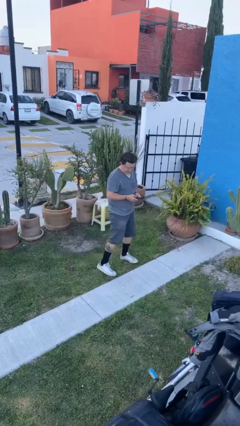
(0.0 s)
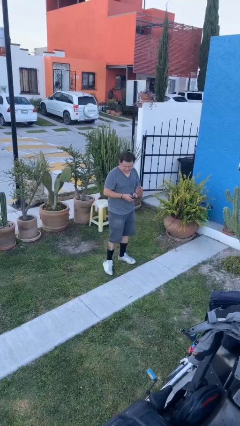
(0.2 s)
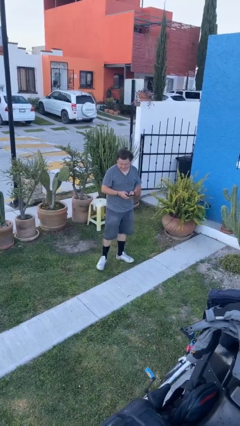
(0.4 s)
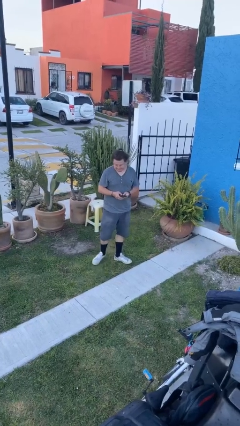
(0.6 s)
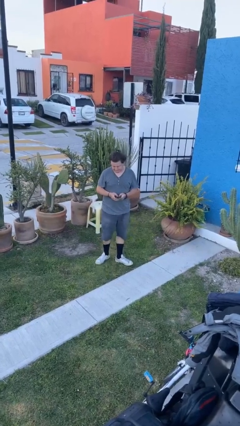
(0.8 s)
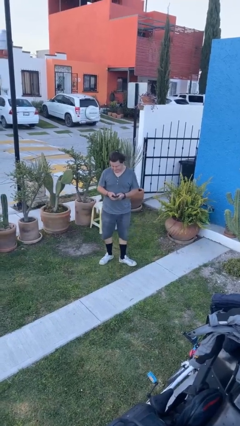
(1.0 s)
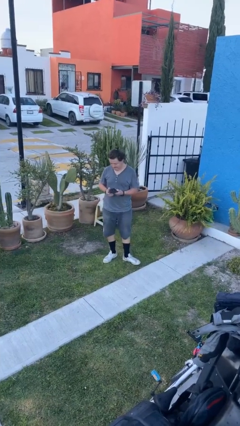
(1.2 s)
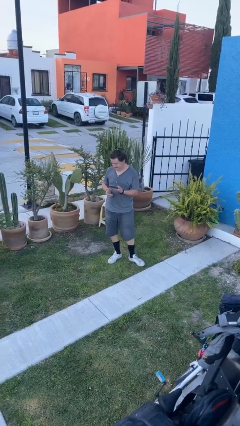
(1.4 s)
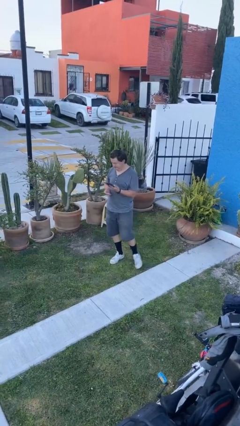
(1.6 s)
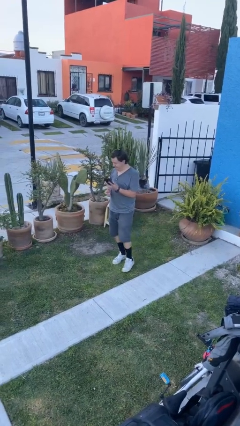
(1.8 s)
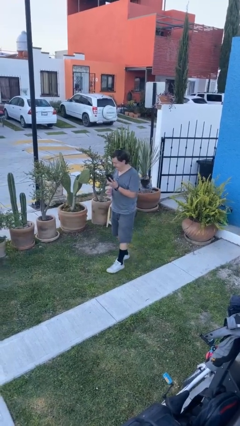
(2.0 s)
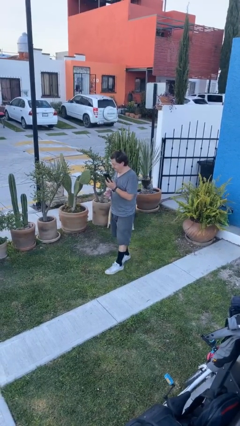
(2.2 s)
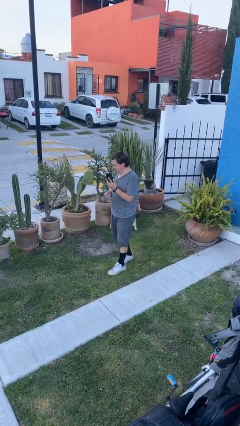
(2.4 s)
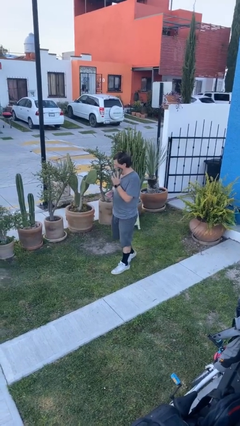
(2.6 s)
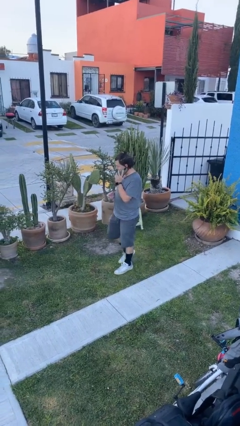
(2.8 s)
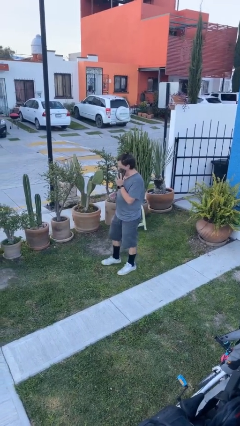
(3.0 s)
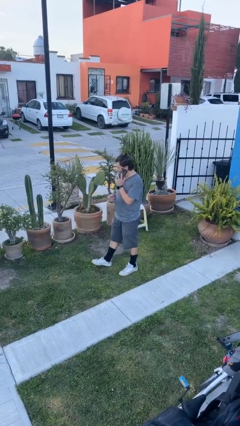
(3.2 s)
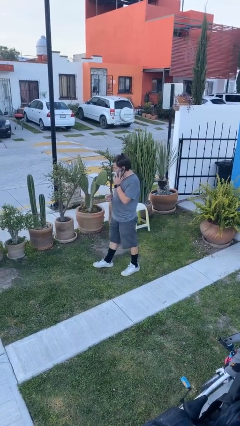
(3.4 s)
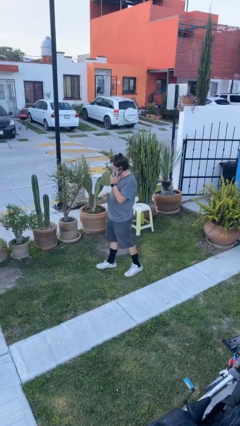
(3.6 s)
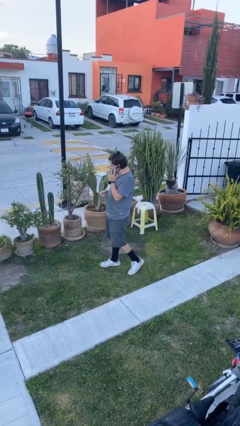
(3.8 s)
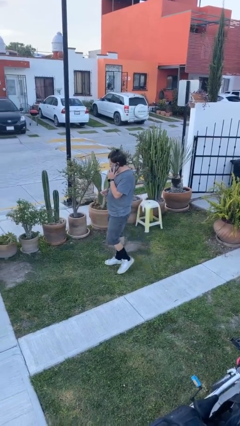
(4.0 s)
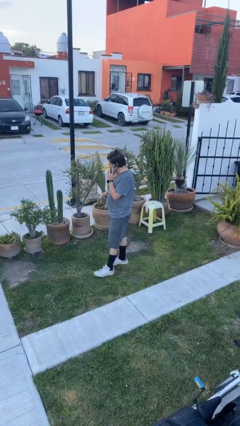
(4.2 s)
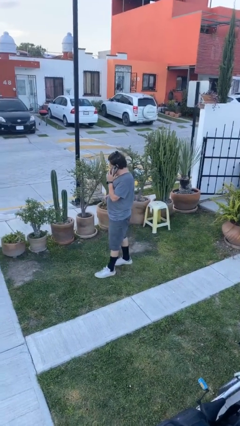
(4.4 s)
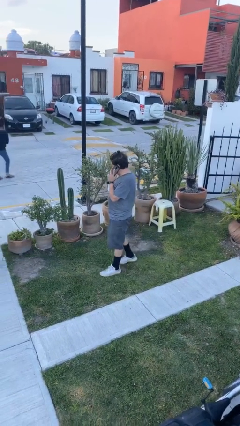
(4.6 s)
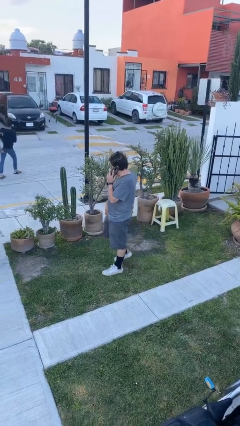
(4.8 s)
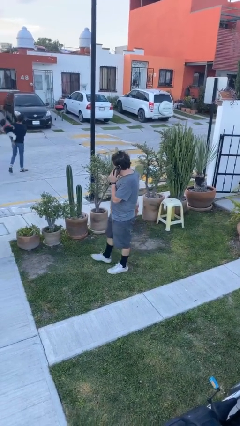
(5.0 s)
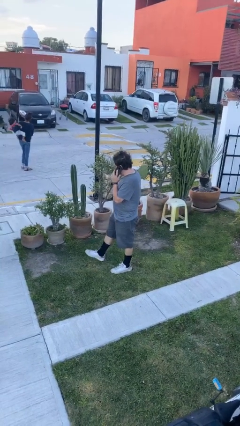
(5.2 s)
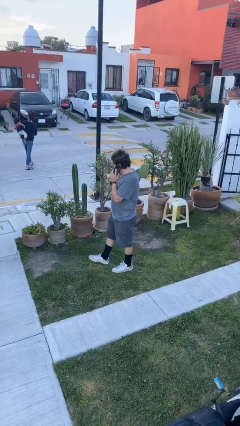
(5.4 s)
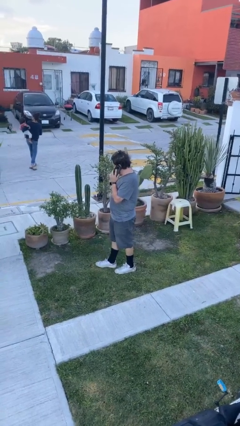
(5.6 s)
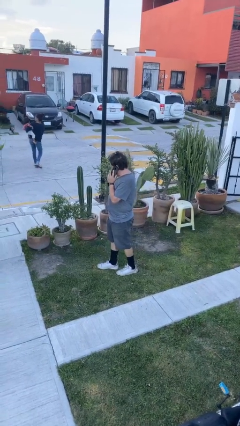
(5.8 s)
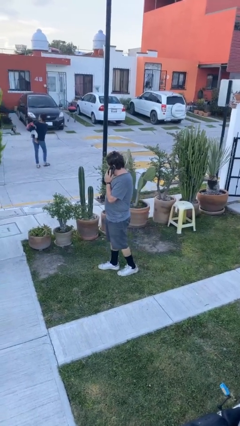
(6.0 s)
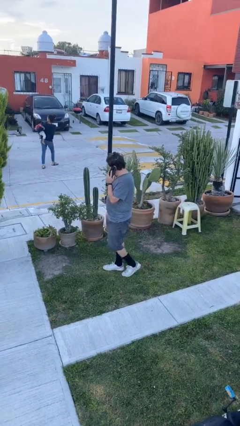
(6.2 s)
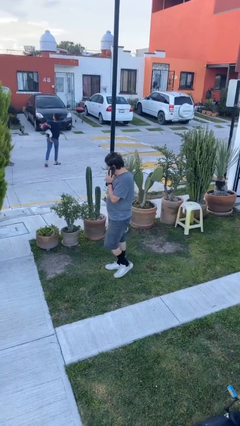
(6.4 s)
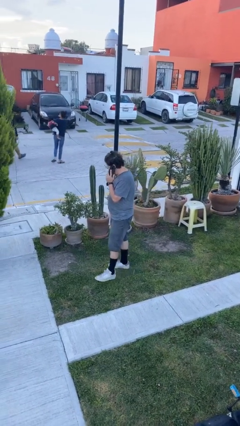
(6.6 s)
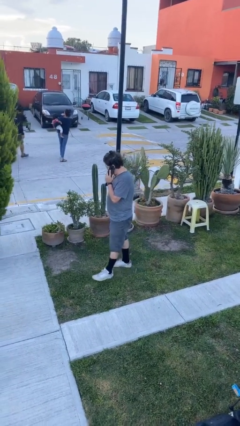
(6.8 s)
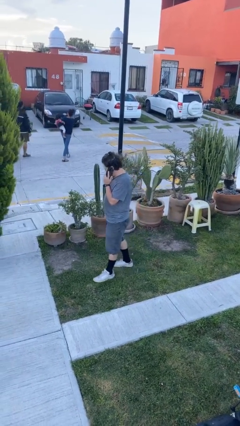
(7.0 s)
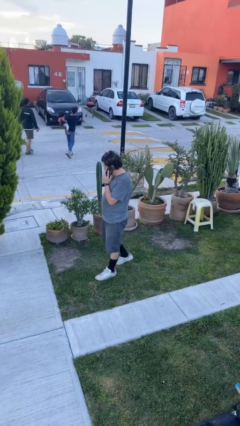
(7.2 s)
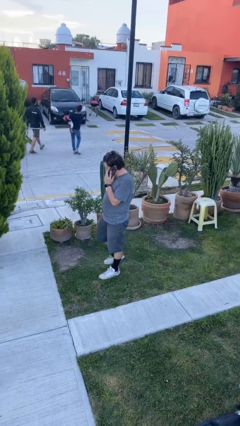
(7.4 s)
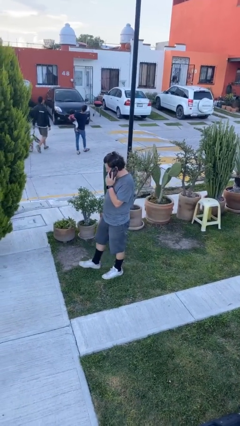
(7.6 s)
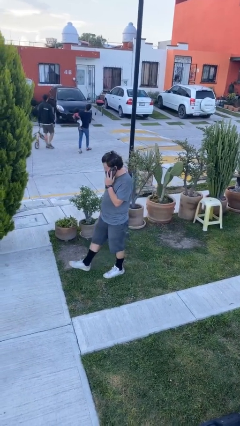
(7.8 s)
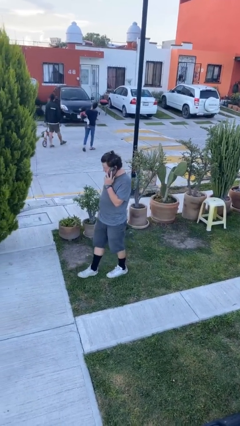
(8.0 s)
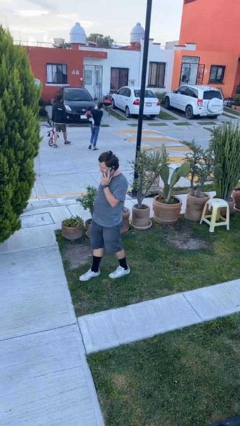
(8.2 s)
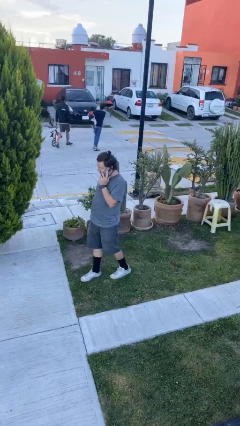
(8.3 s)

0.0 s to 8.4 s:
person talks on phone

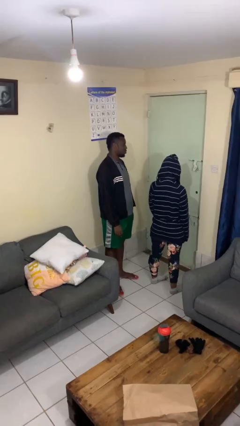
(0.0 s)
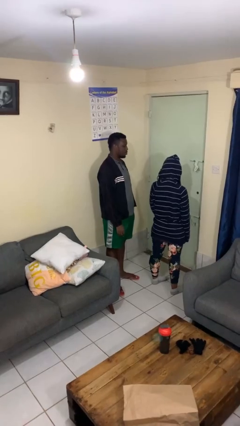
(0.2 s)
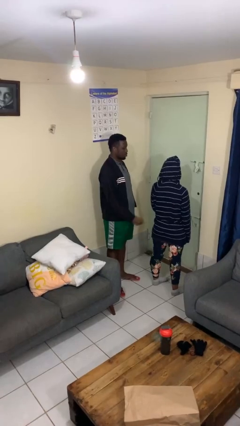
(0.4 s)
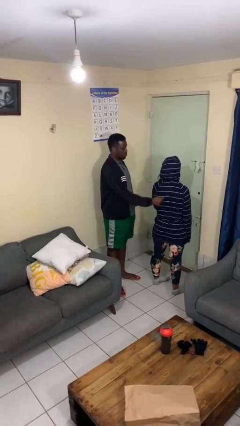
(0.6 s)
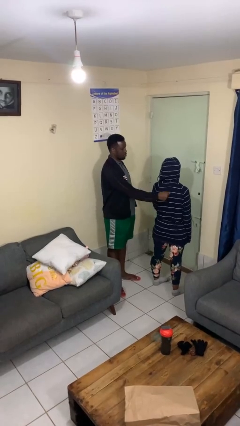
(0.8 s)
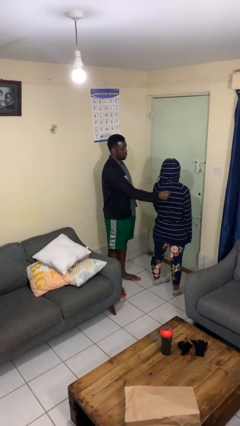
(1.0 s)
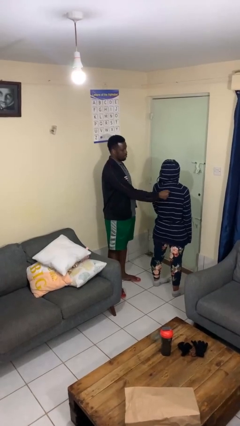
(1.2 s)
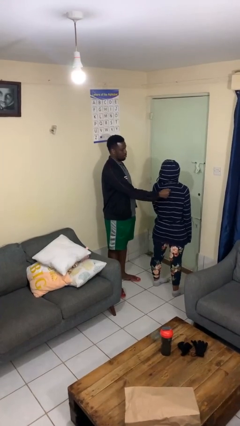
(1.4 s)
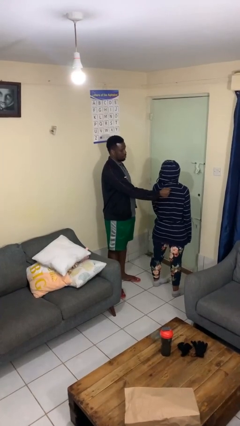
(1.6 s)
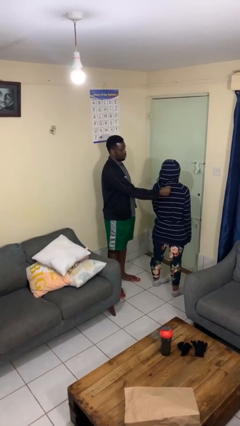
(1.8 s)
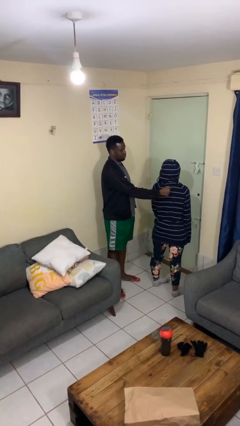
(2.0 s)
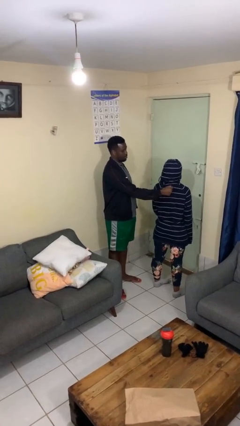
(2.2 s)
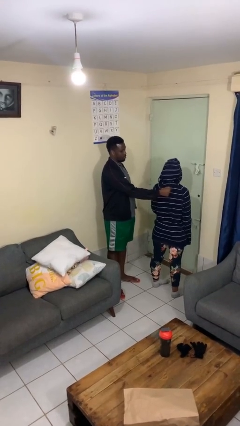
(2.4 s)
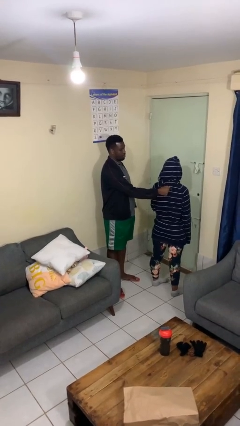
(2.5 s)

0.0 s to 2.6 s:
person touches back of person

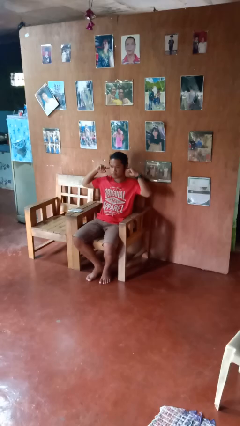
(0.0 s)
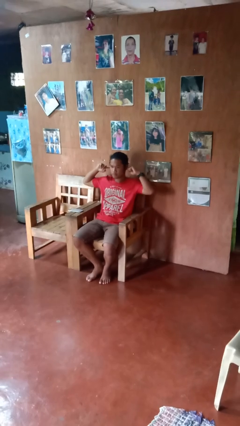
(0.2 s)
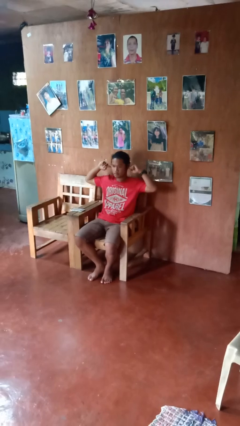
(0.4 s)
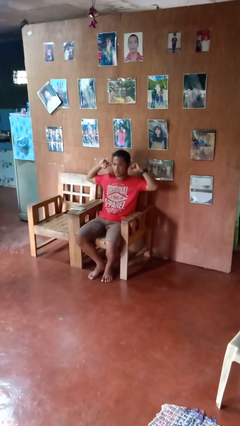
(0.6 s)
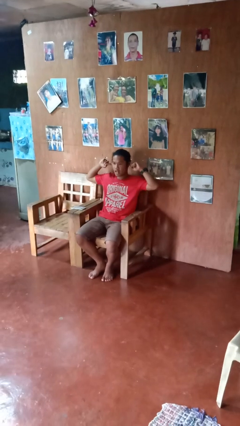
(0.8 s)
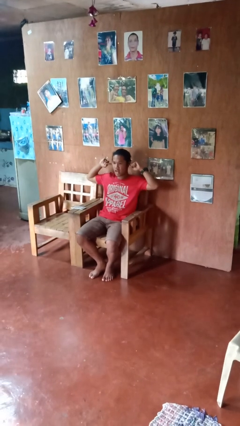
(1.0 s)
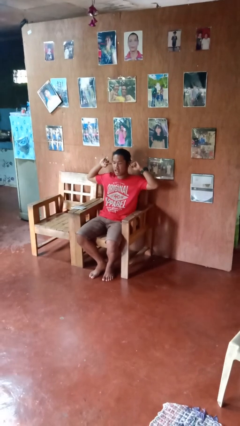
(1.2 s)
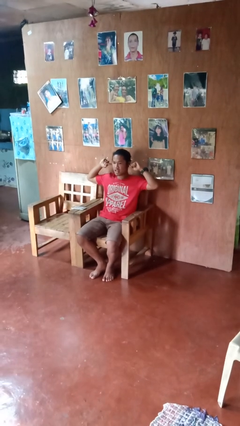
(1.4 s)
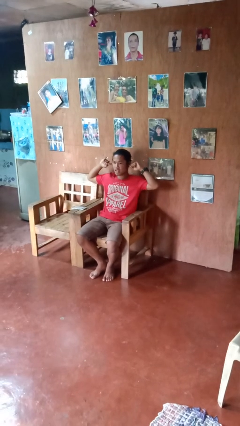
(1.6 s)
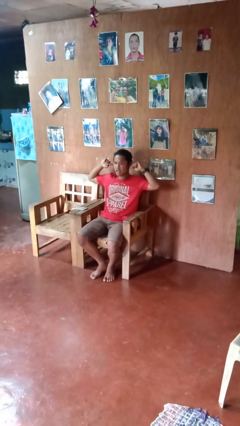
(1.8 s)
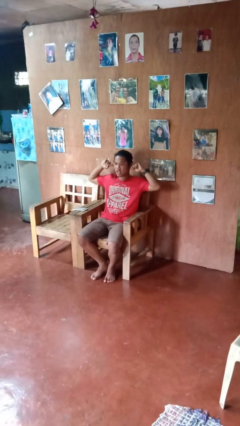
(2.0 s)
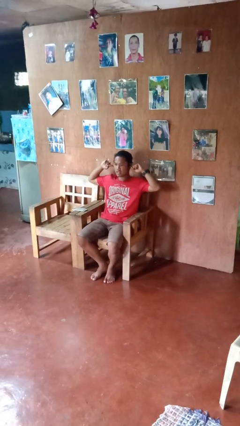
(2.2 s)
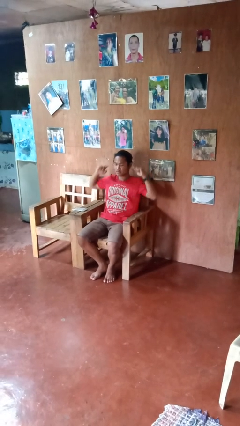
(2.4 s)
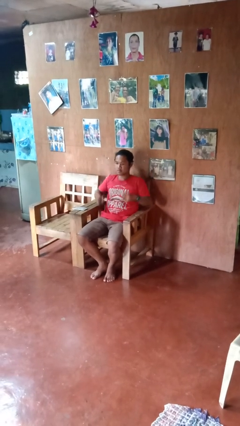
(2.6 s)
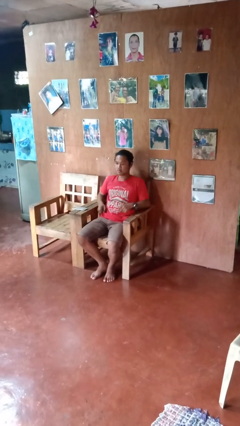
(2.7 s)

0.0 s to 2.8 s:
person puts fingers in ear

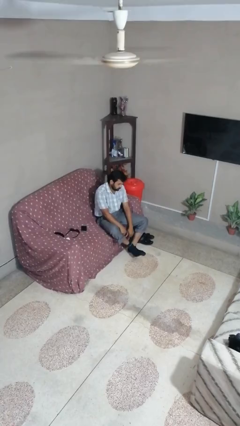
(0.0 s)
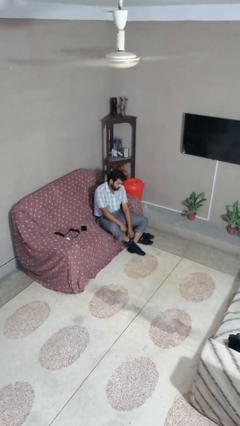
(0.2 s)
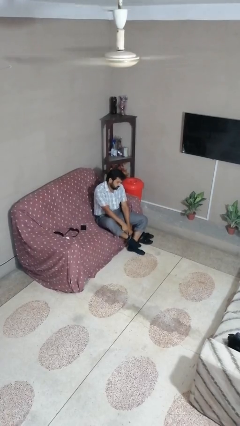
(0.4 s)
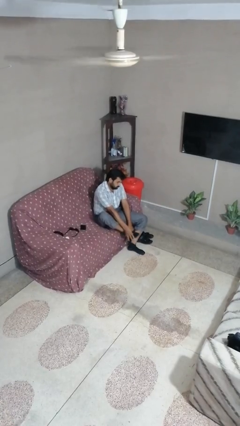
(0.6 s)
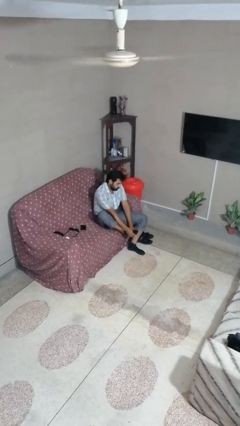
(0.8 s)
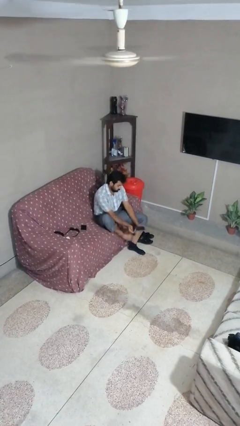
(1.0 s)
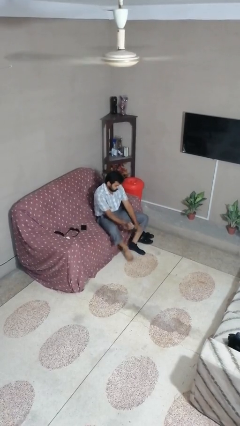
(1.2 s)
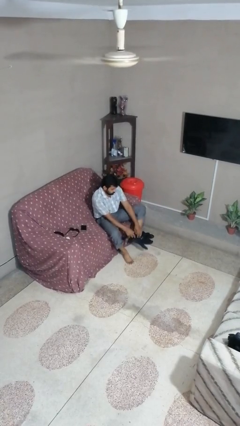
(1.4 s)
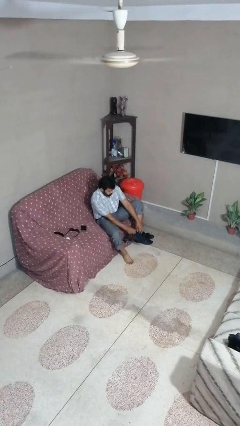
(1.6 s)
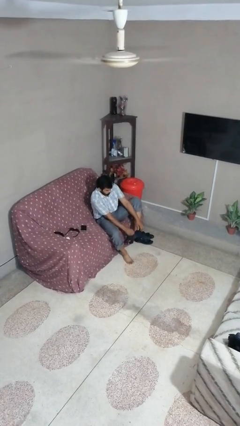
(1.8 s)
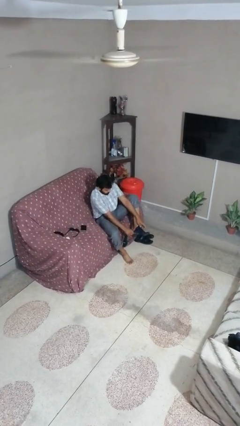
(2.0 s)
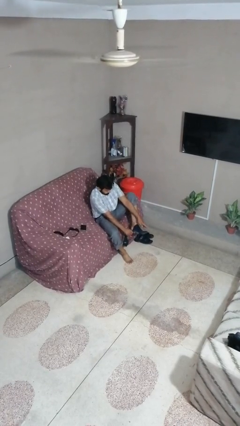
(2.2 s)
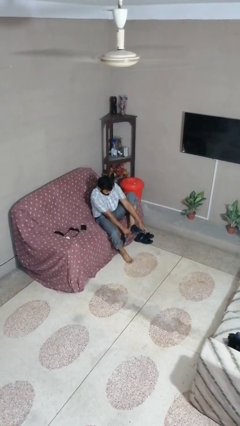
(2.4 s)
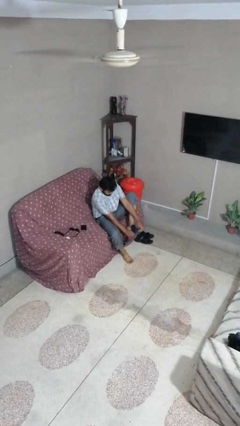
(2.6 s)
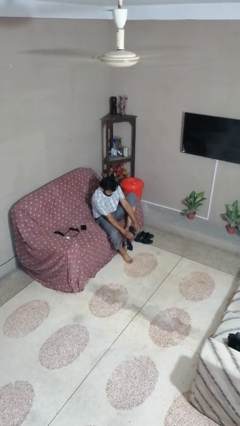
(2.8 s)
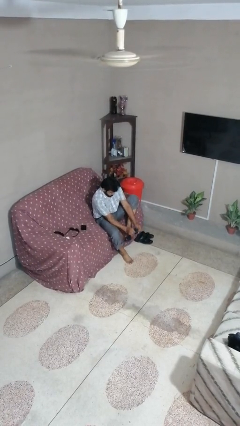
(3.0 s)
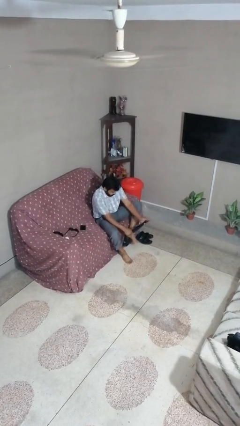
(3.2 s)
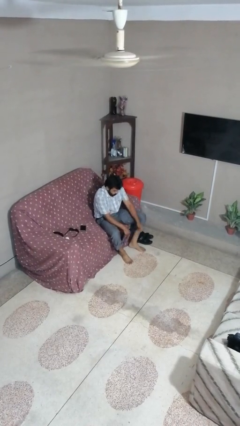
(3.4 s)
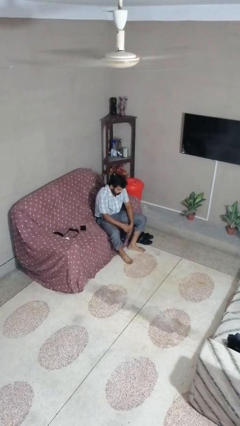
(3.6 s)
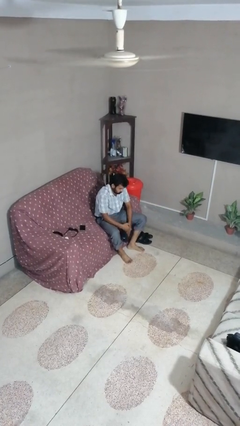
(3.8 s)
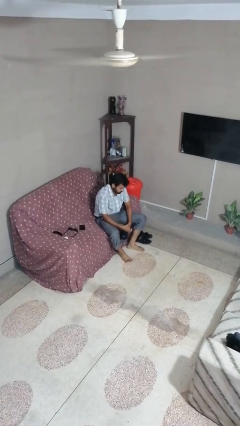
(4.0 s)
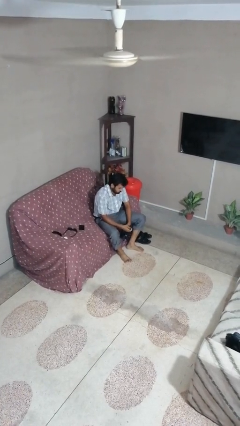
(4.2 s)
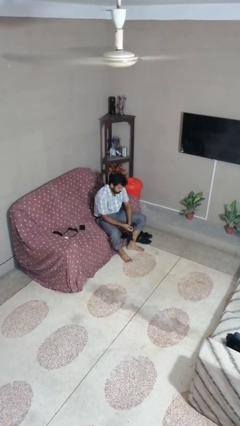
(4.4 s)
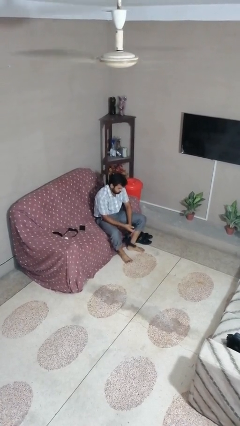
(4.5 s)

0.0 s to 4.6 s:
person takes off socks
